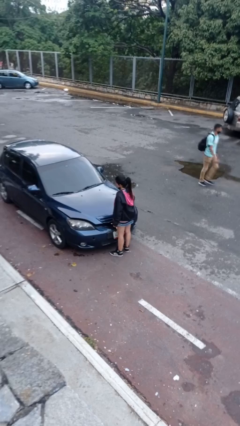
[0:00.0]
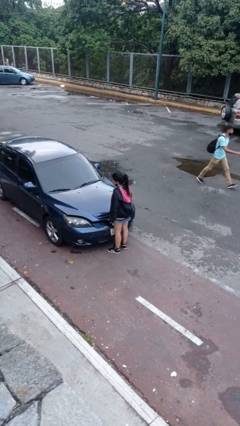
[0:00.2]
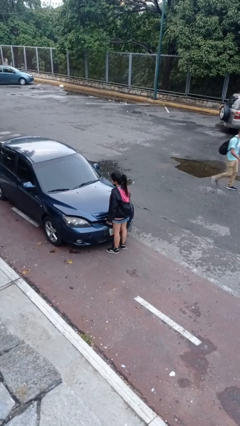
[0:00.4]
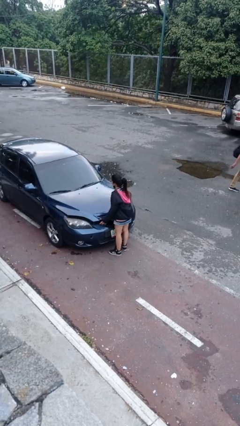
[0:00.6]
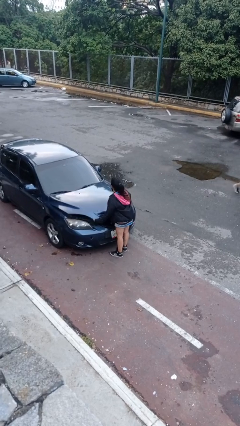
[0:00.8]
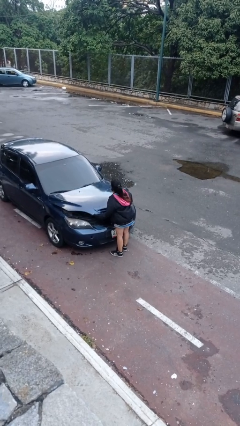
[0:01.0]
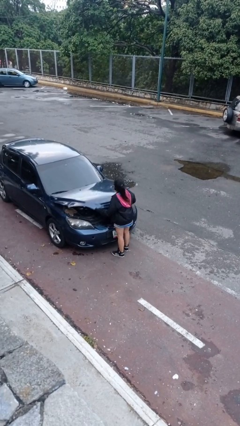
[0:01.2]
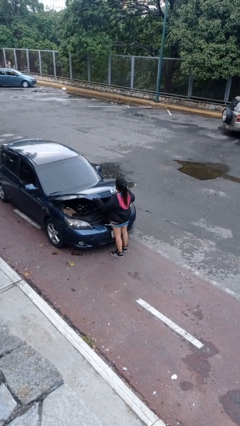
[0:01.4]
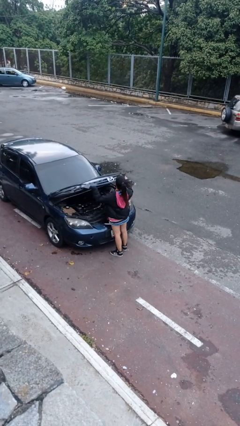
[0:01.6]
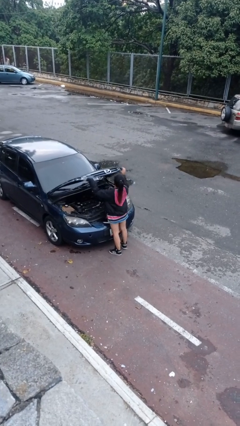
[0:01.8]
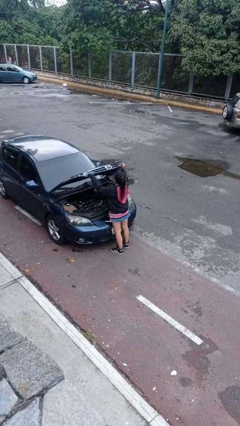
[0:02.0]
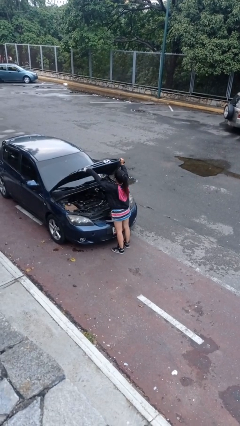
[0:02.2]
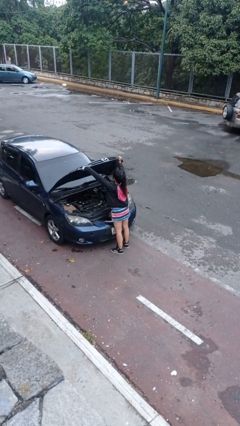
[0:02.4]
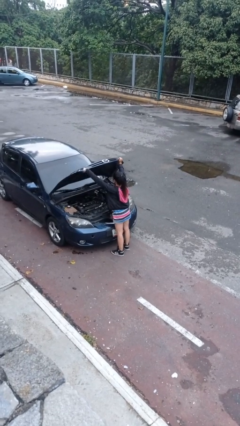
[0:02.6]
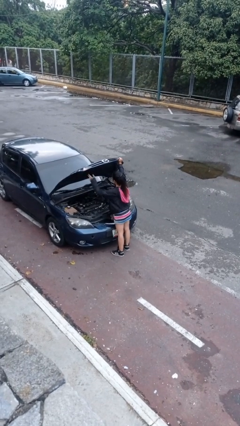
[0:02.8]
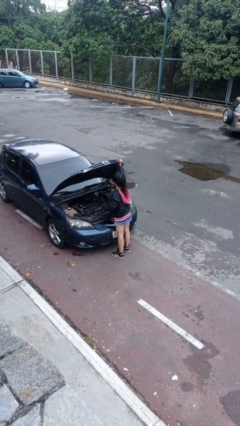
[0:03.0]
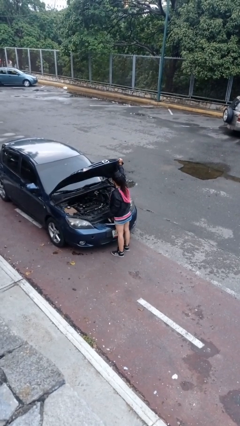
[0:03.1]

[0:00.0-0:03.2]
person opens car hood

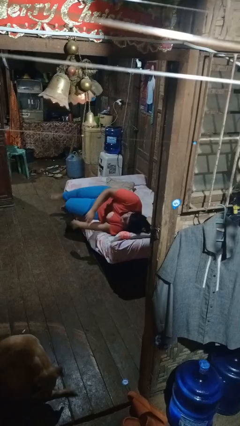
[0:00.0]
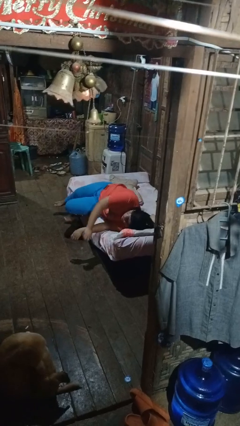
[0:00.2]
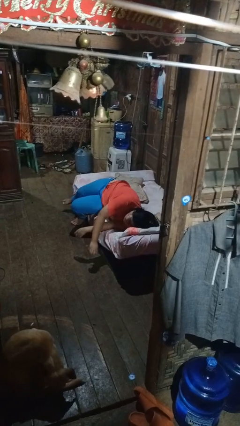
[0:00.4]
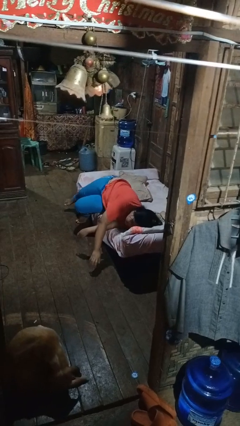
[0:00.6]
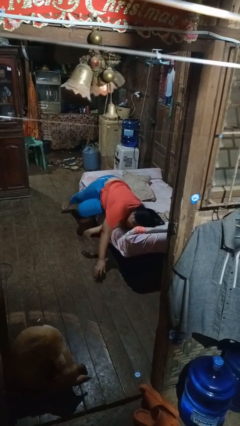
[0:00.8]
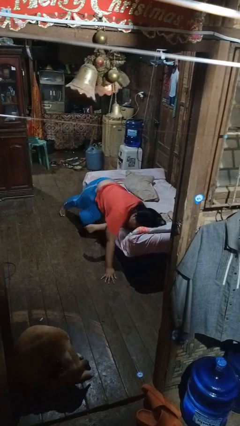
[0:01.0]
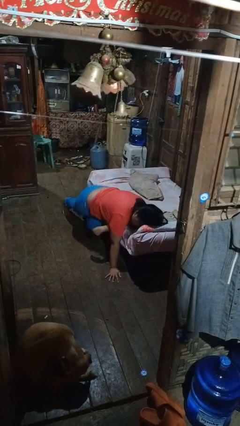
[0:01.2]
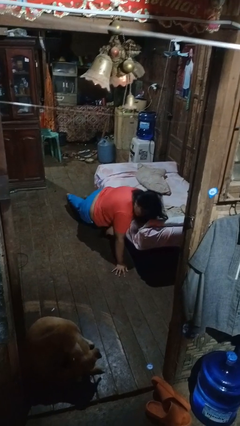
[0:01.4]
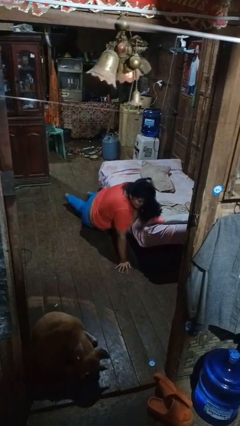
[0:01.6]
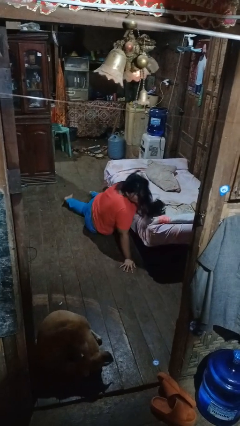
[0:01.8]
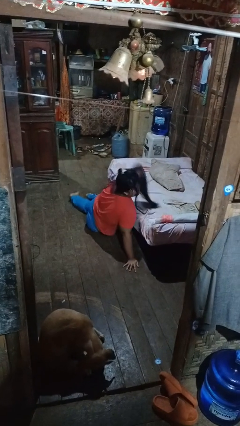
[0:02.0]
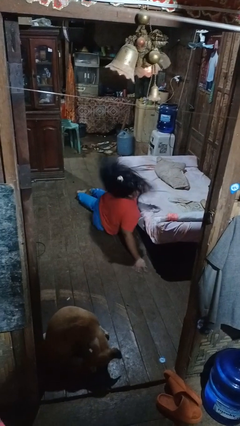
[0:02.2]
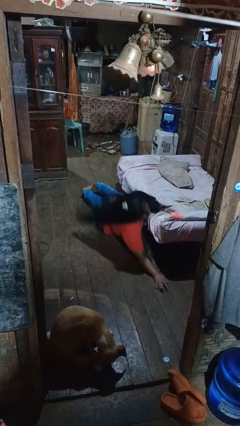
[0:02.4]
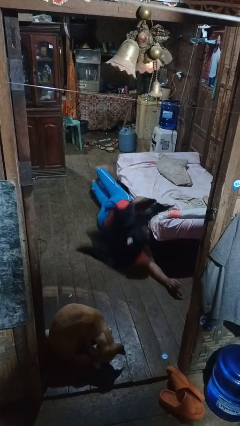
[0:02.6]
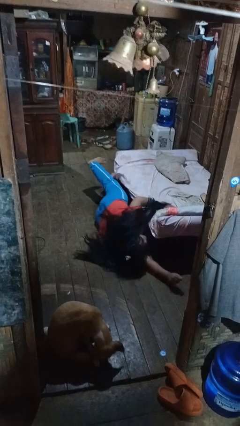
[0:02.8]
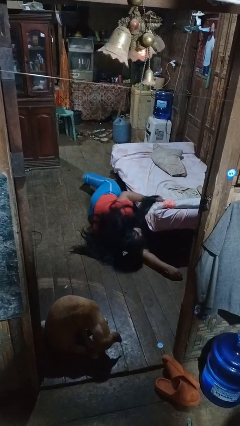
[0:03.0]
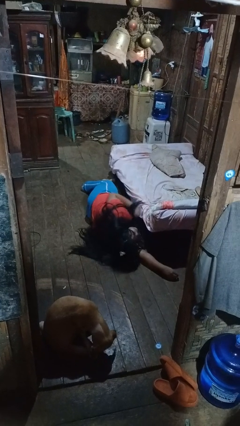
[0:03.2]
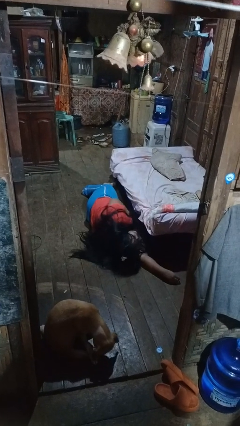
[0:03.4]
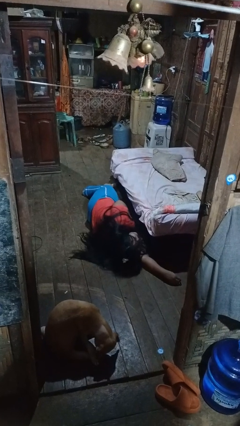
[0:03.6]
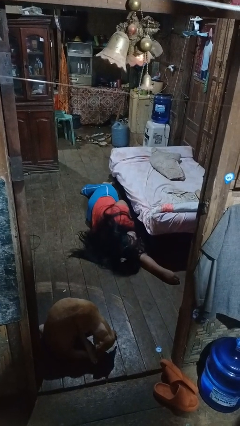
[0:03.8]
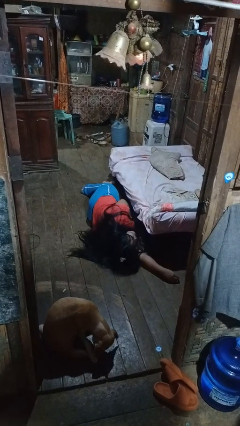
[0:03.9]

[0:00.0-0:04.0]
person falls from bed

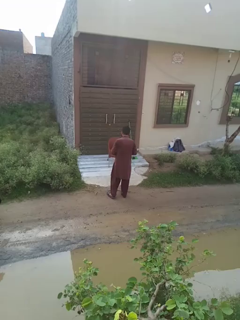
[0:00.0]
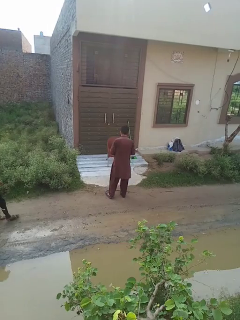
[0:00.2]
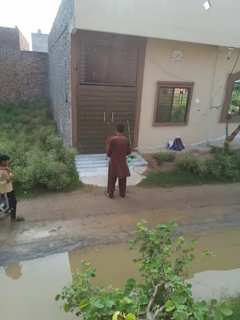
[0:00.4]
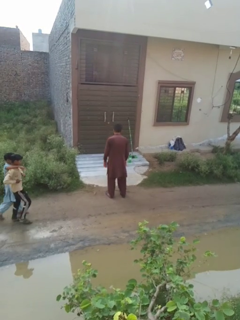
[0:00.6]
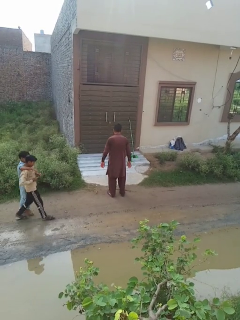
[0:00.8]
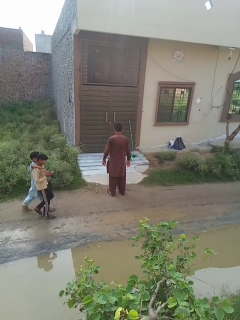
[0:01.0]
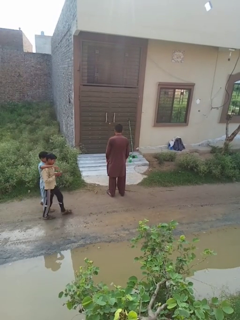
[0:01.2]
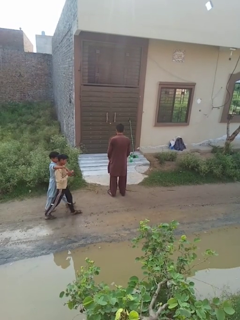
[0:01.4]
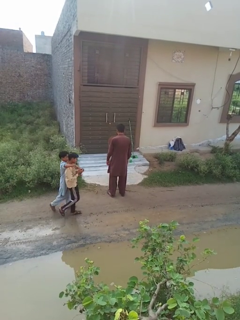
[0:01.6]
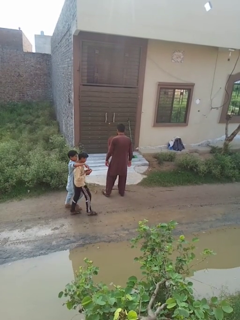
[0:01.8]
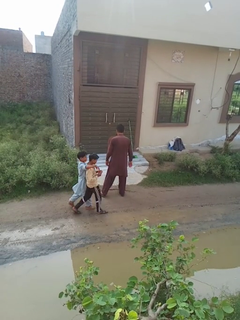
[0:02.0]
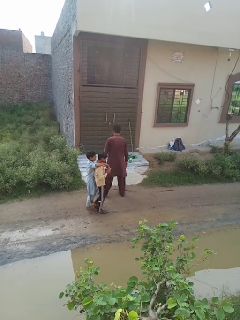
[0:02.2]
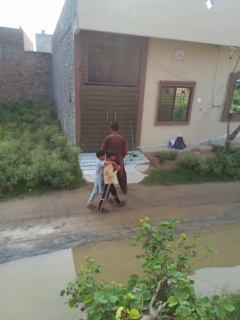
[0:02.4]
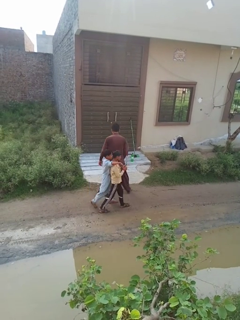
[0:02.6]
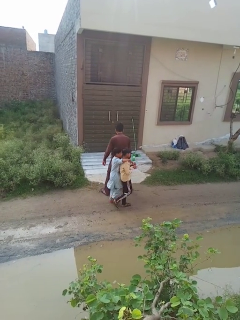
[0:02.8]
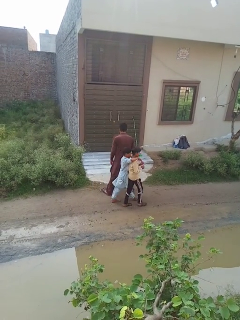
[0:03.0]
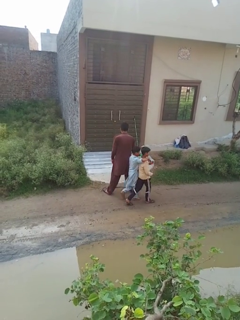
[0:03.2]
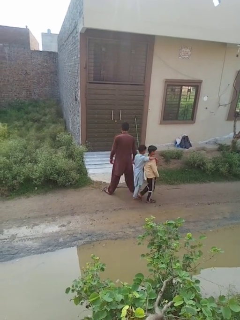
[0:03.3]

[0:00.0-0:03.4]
person stretches back

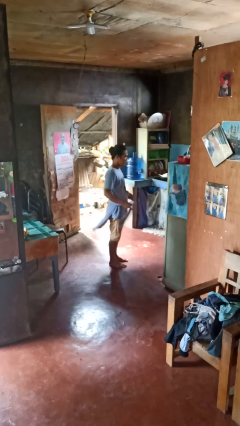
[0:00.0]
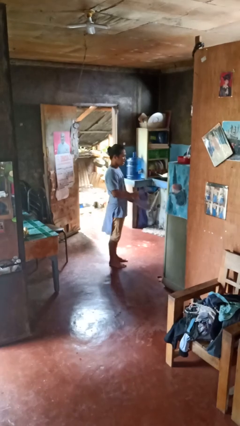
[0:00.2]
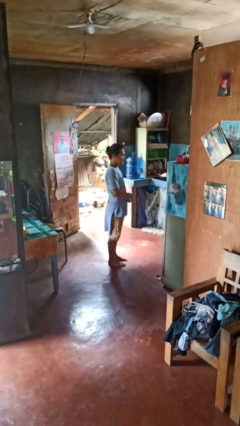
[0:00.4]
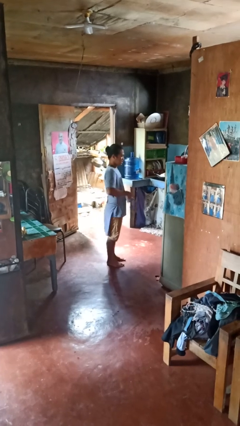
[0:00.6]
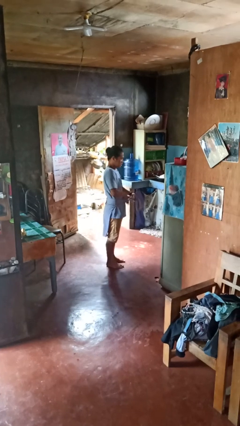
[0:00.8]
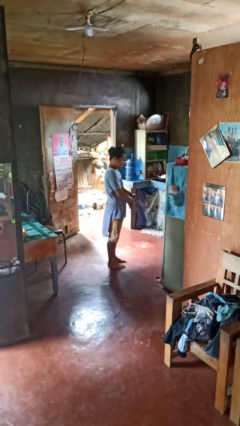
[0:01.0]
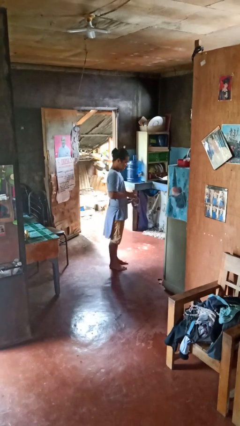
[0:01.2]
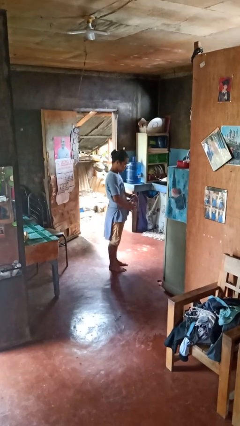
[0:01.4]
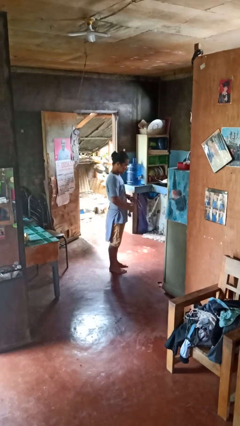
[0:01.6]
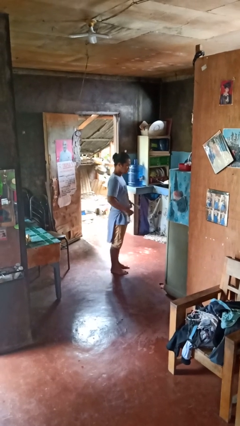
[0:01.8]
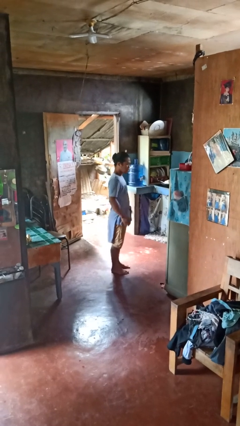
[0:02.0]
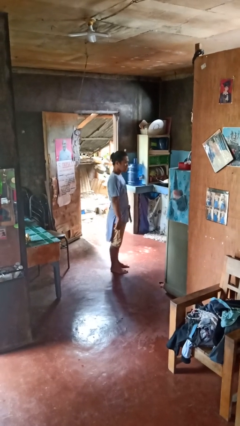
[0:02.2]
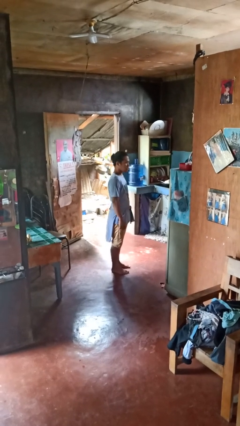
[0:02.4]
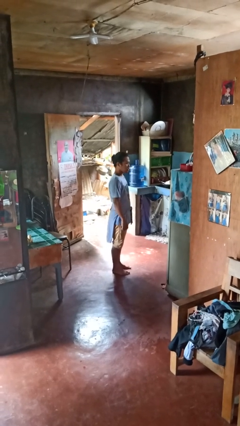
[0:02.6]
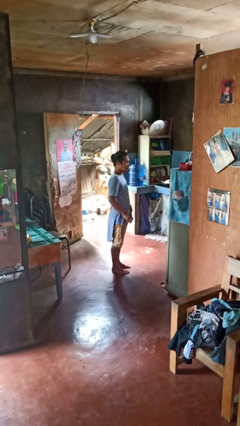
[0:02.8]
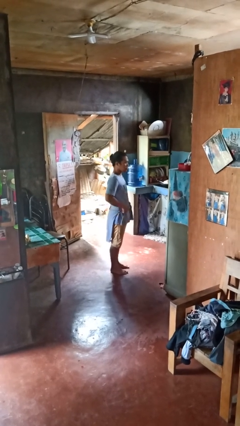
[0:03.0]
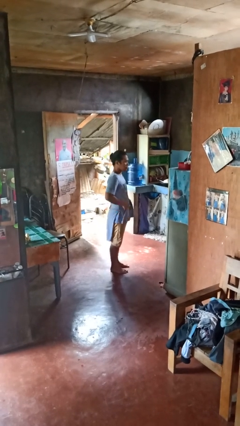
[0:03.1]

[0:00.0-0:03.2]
person ties jacket around waist

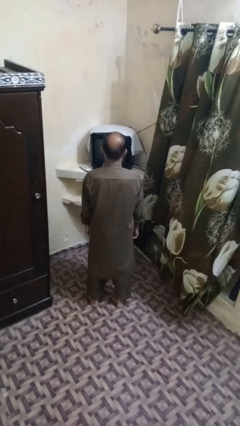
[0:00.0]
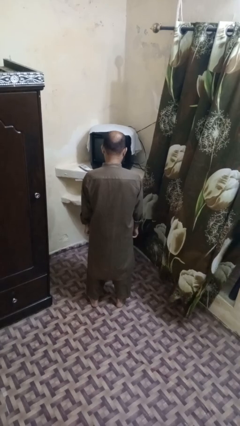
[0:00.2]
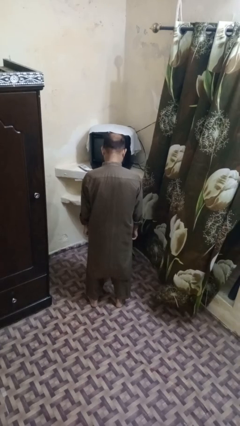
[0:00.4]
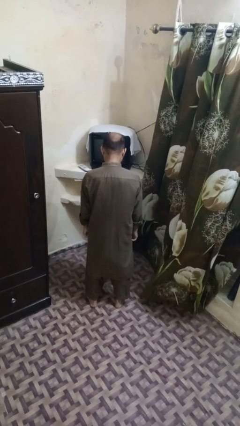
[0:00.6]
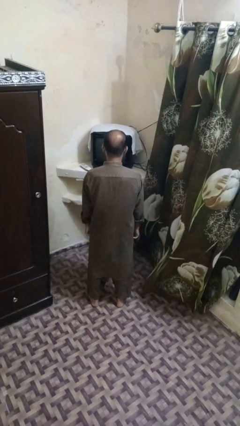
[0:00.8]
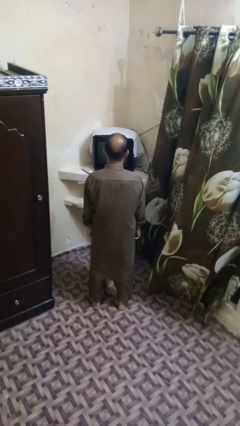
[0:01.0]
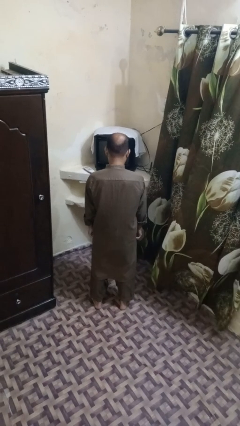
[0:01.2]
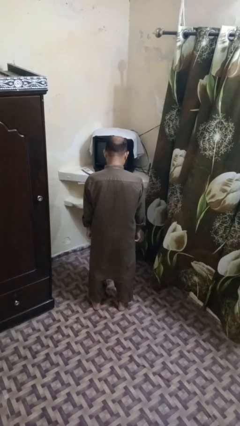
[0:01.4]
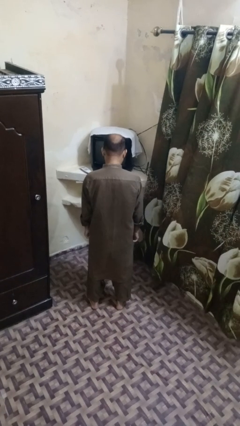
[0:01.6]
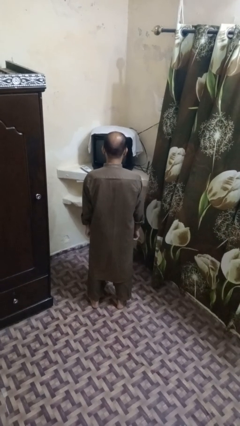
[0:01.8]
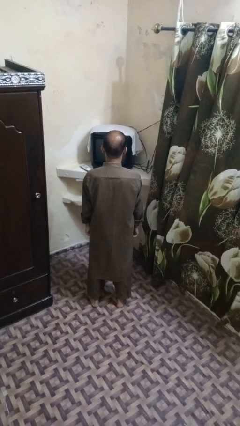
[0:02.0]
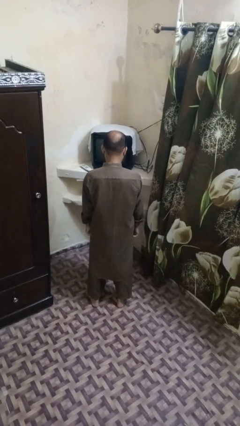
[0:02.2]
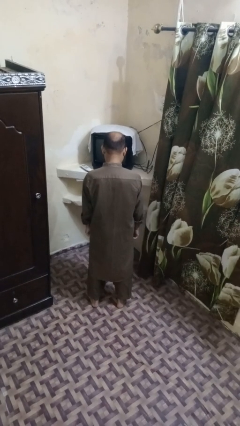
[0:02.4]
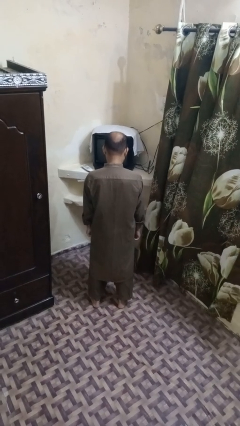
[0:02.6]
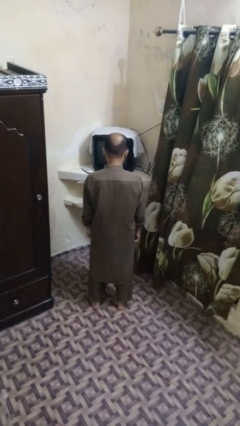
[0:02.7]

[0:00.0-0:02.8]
person nods head

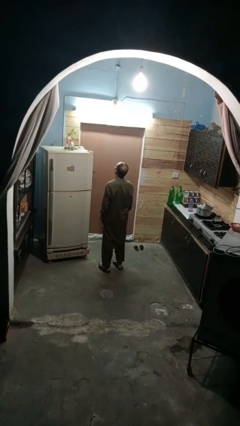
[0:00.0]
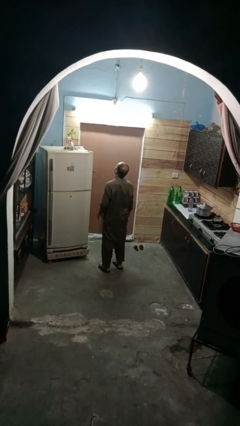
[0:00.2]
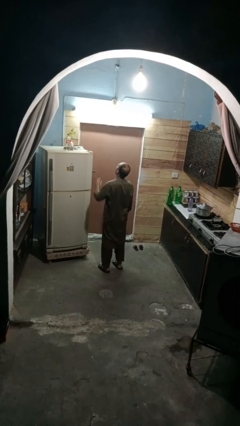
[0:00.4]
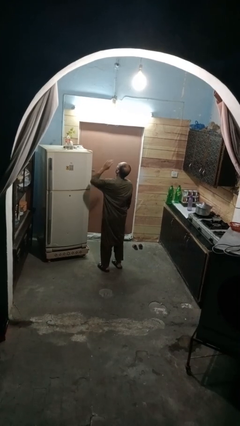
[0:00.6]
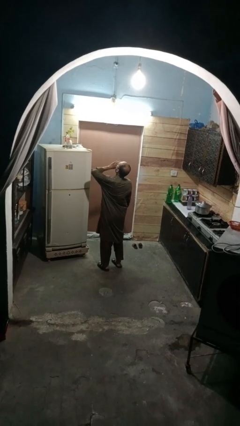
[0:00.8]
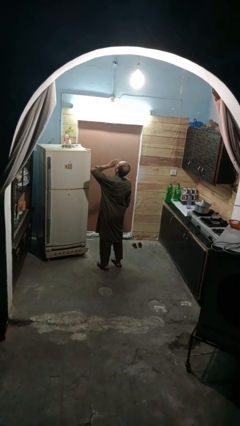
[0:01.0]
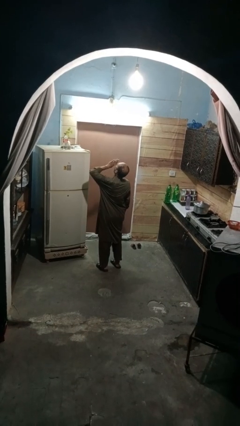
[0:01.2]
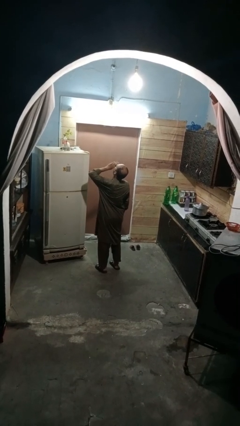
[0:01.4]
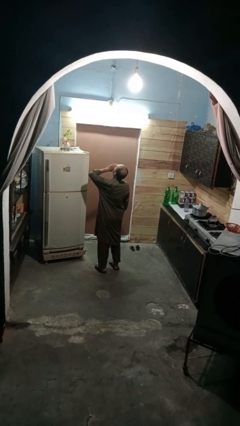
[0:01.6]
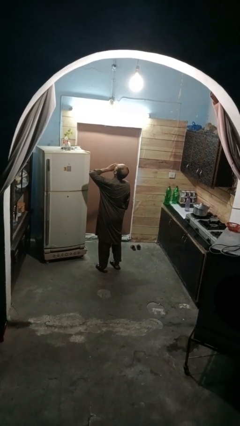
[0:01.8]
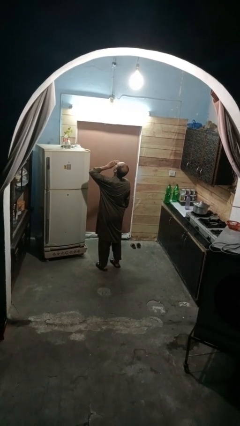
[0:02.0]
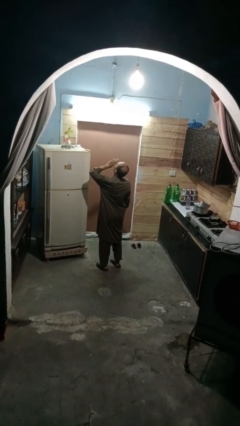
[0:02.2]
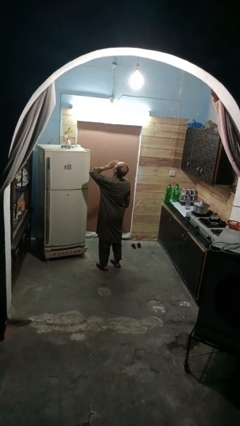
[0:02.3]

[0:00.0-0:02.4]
person yawns
